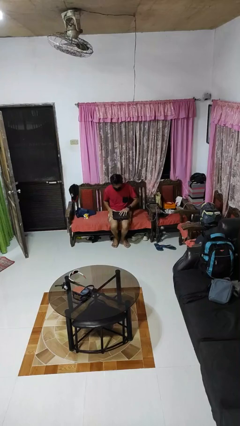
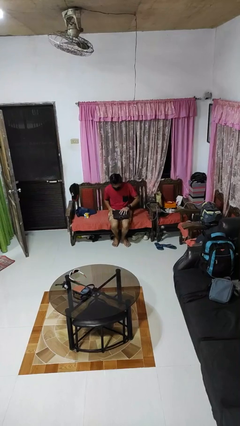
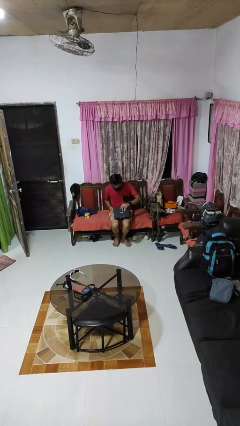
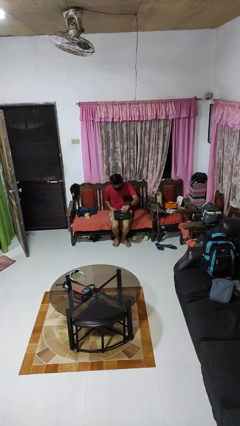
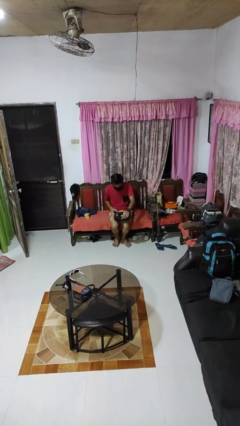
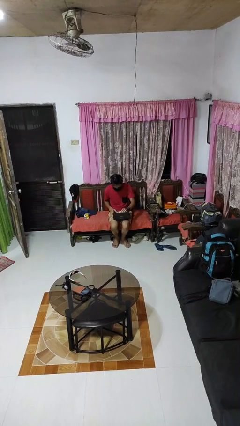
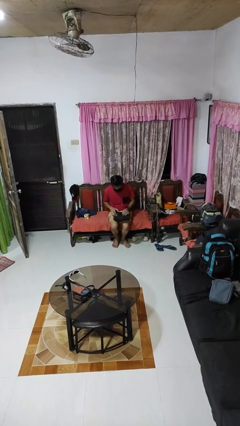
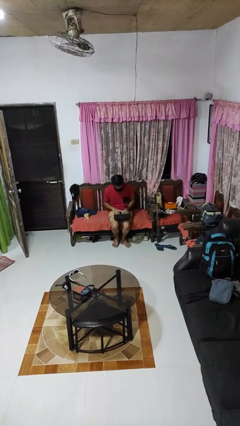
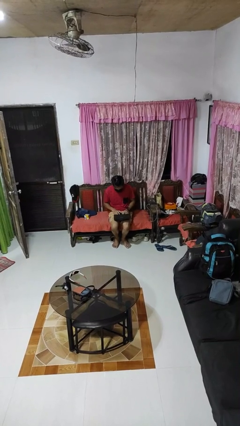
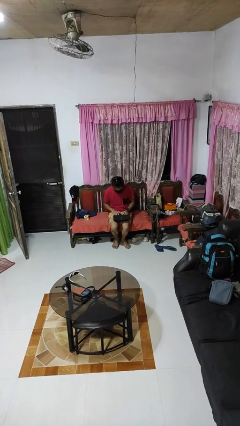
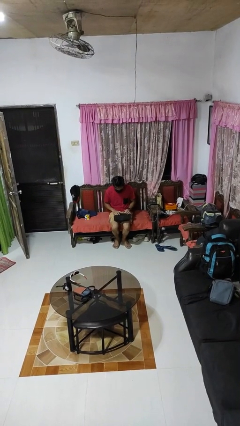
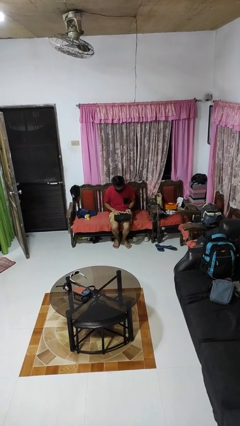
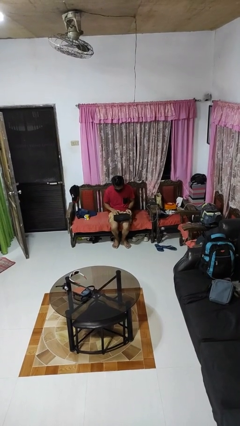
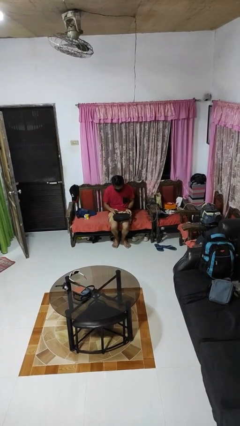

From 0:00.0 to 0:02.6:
person opens laptop

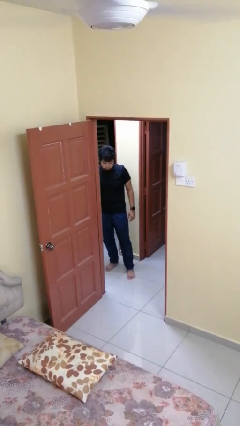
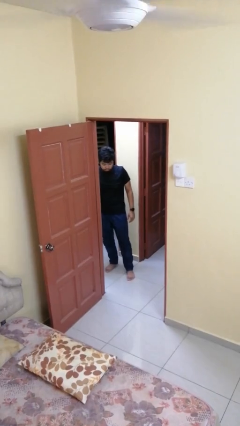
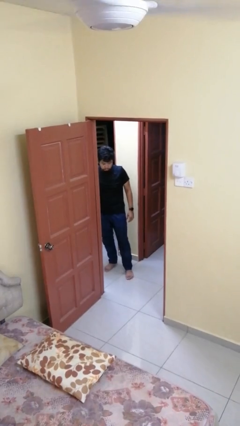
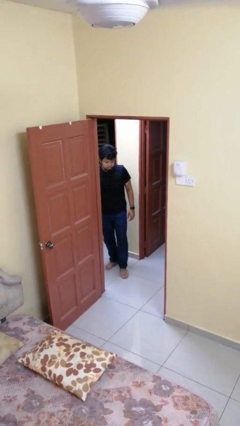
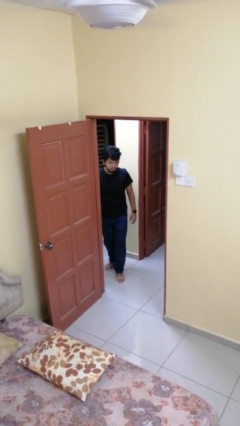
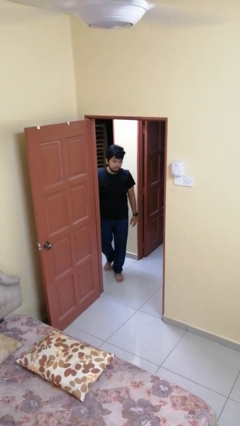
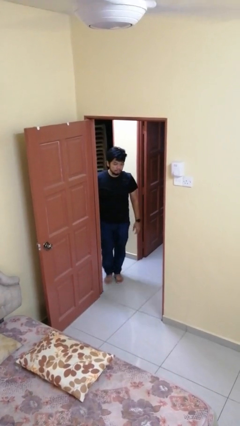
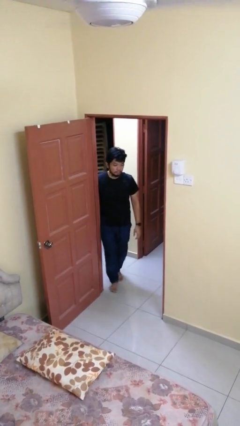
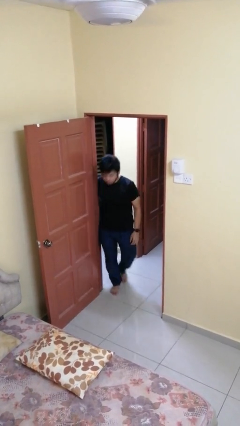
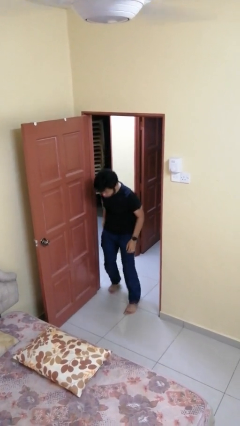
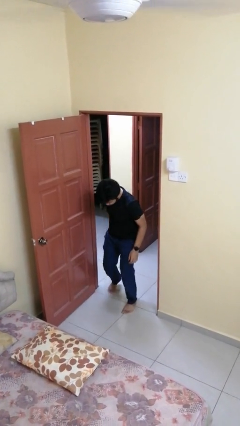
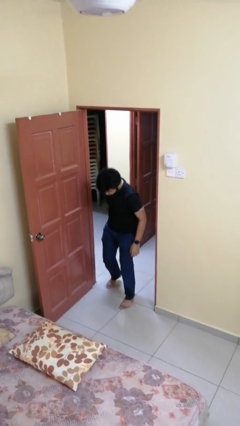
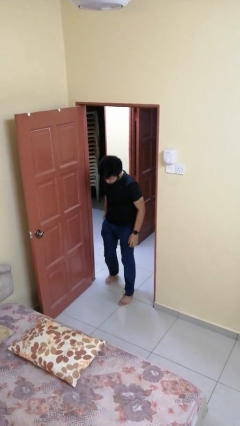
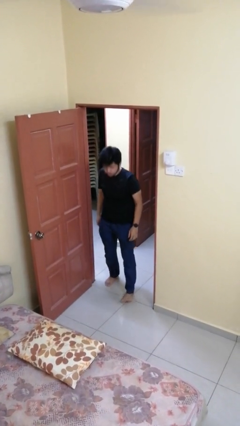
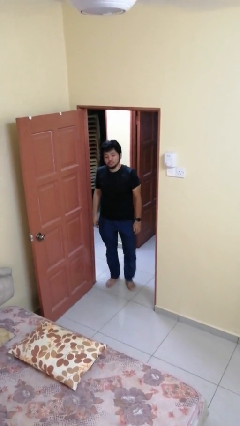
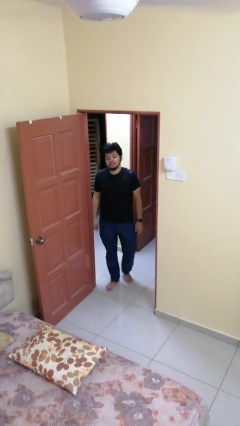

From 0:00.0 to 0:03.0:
person bumps into wall

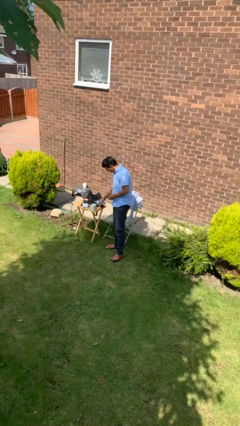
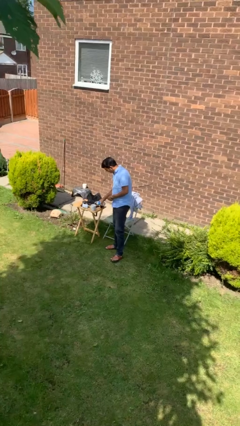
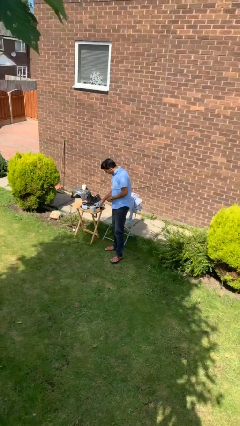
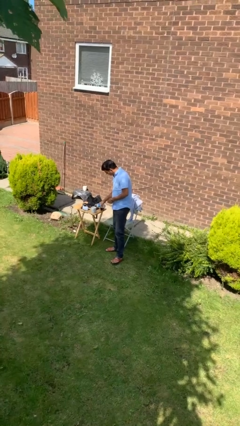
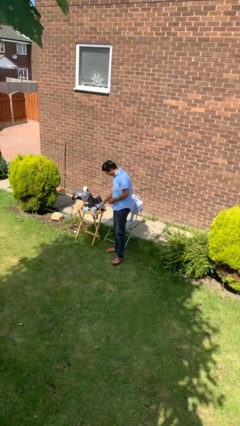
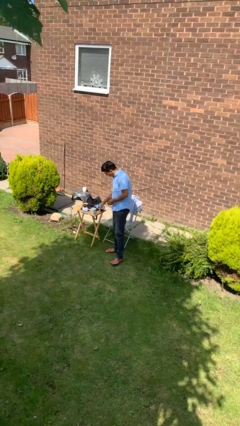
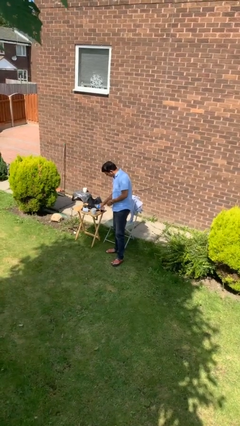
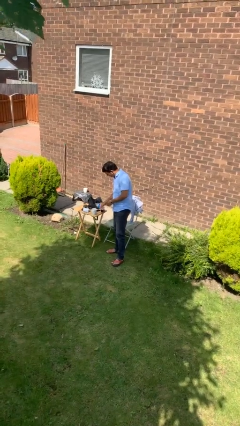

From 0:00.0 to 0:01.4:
person pours liquid into cup

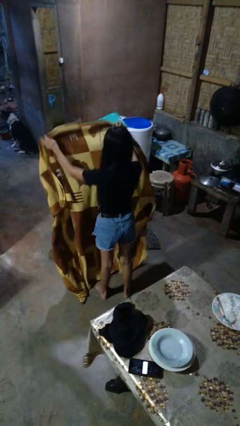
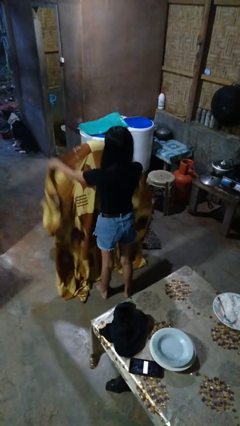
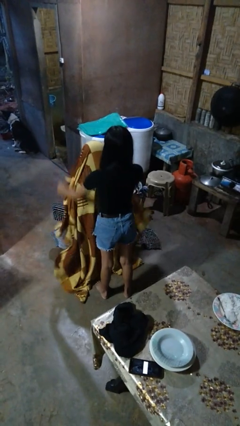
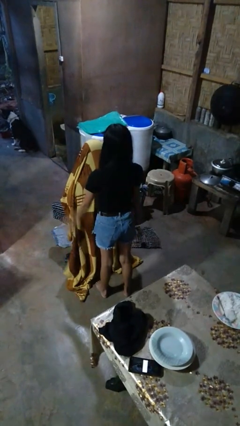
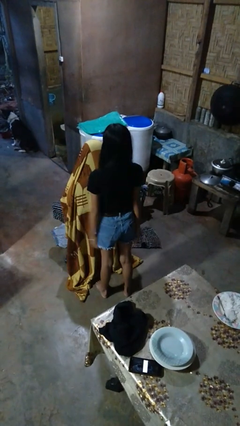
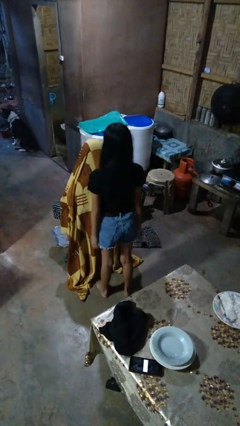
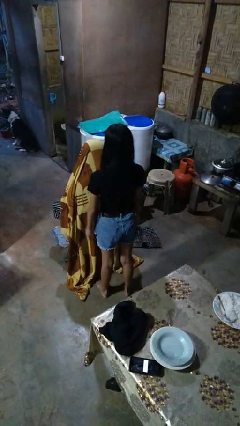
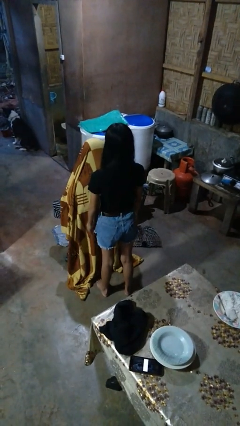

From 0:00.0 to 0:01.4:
person covers friend with blanket

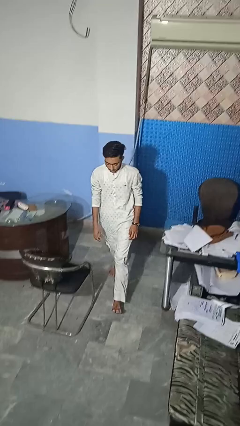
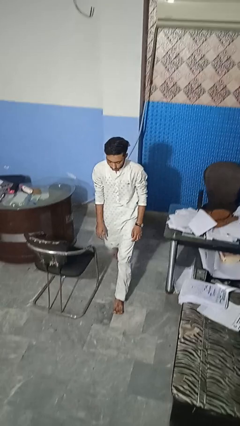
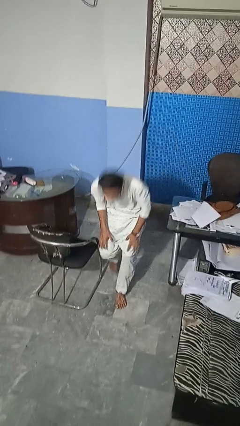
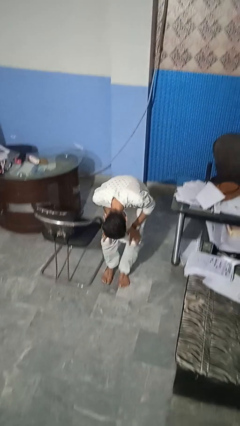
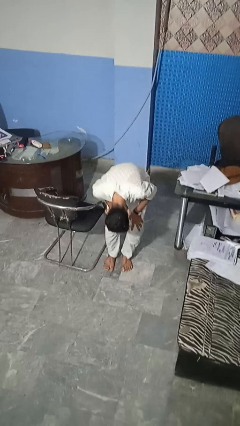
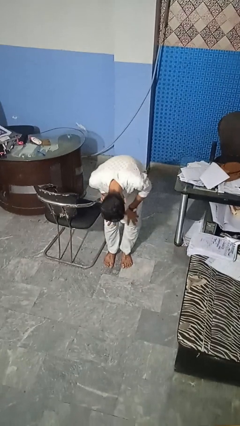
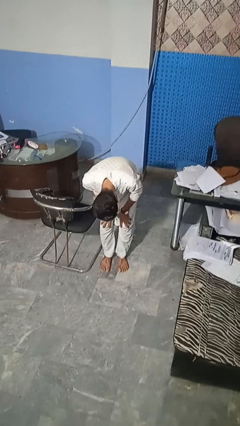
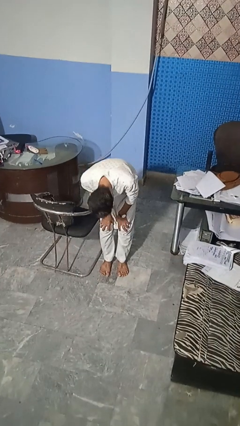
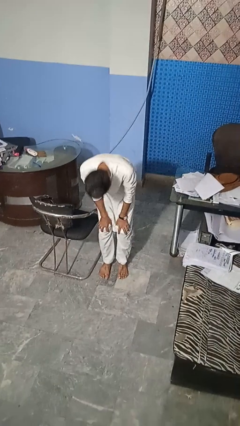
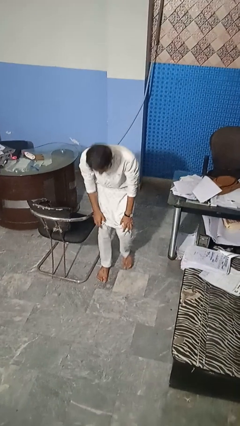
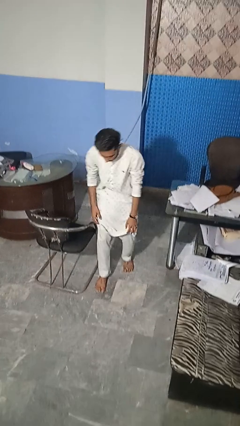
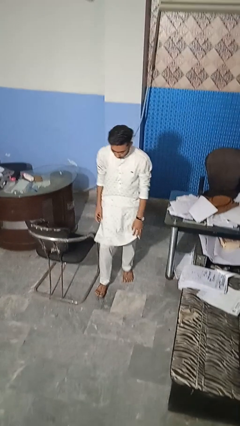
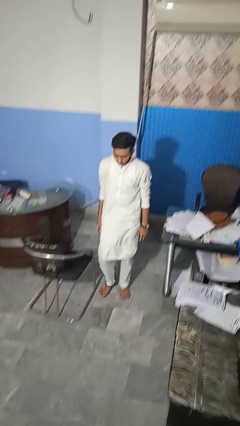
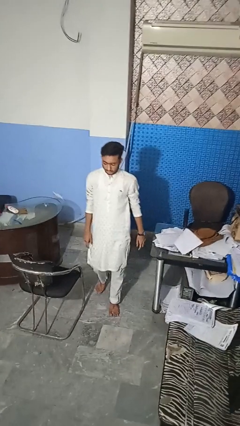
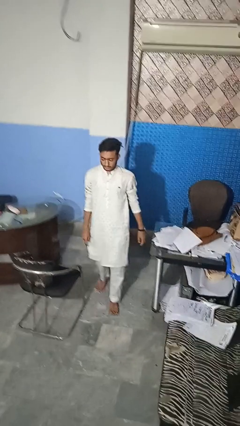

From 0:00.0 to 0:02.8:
person stubs toe

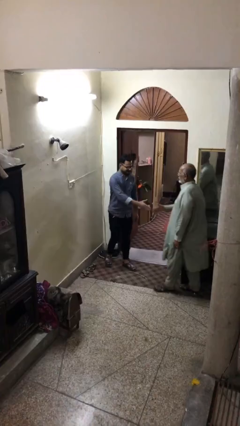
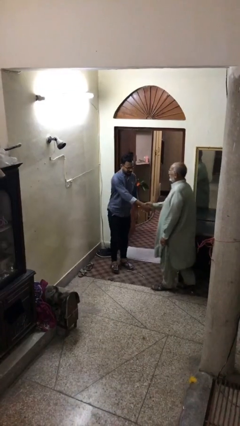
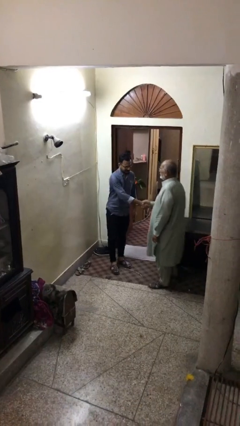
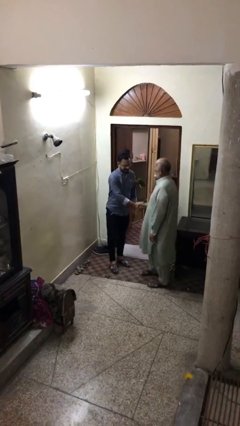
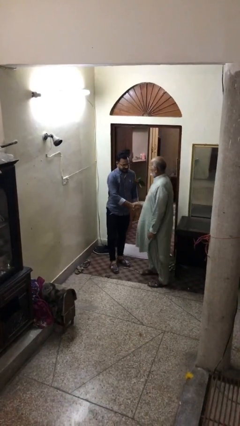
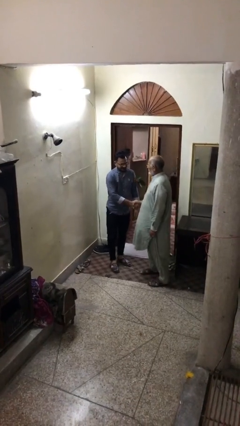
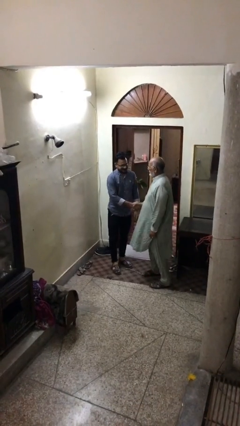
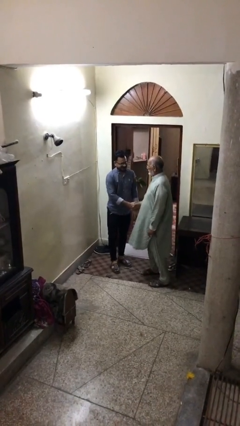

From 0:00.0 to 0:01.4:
person shakes hand

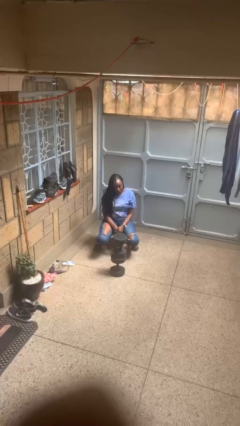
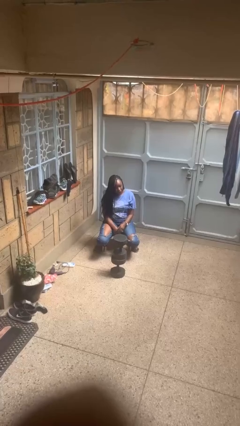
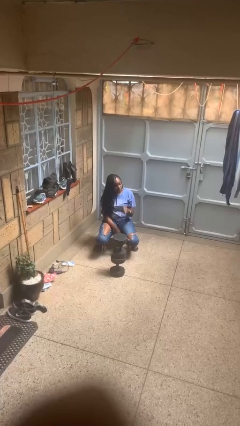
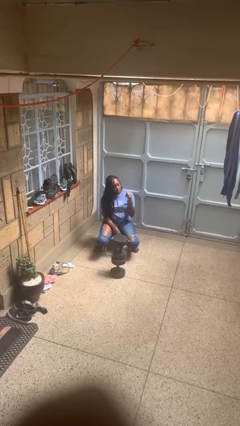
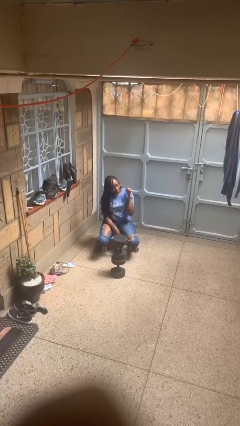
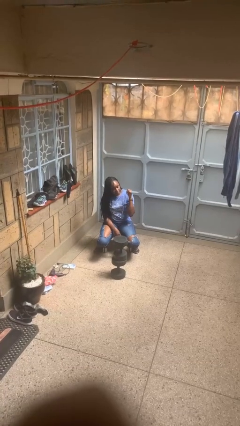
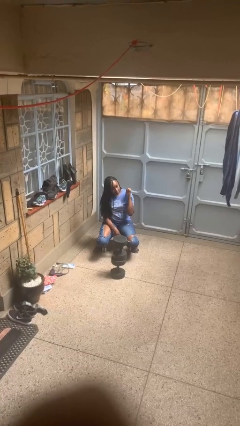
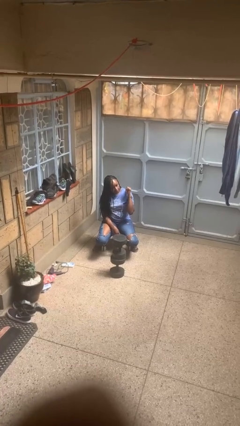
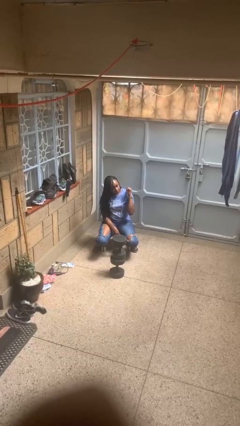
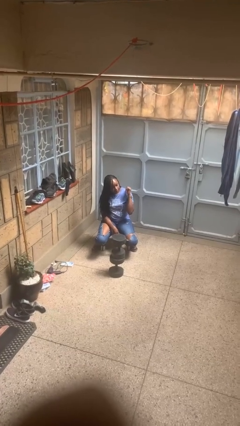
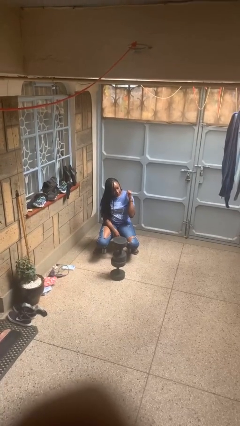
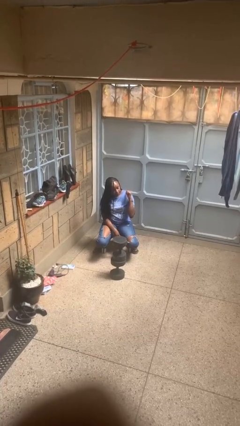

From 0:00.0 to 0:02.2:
person gestures behind me

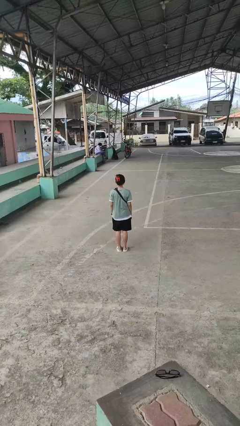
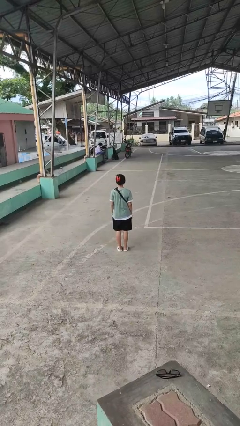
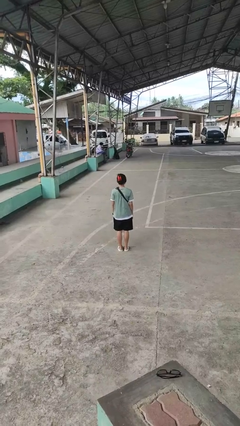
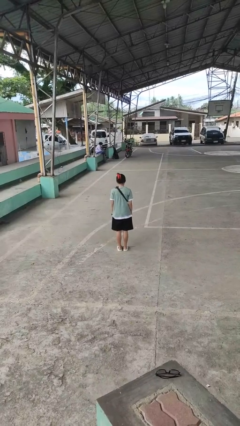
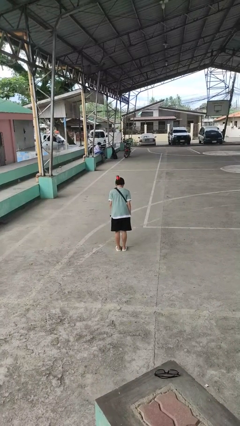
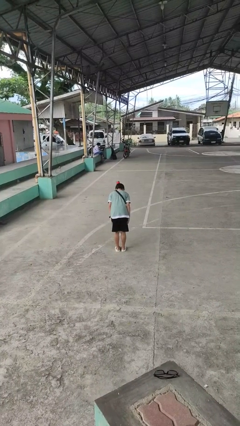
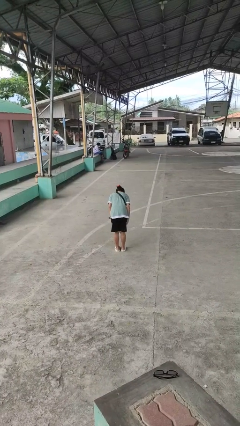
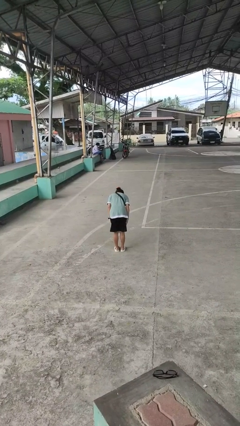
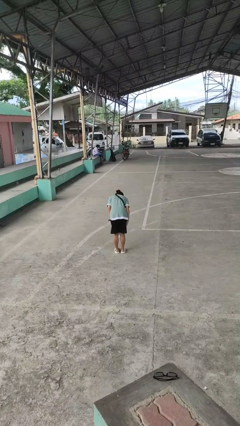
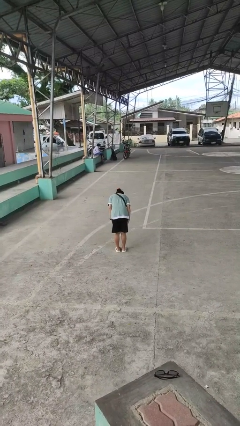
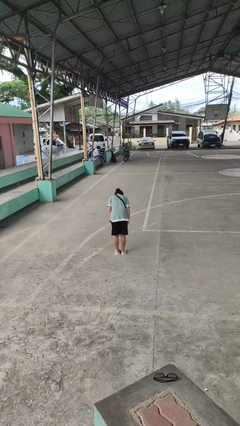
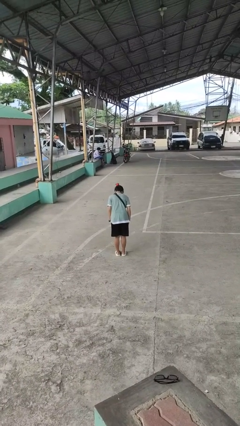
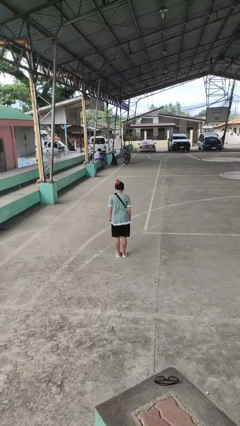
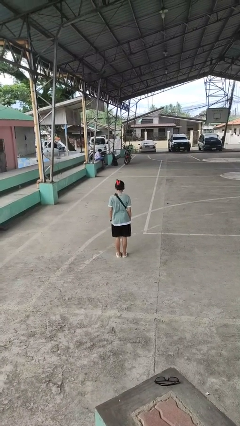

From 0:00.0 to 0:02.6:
person bows
